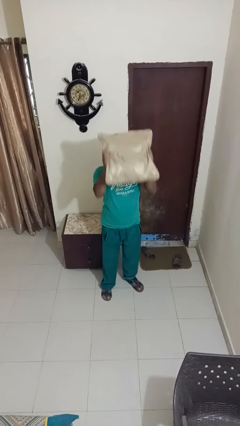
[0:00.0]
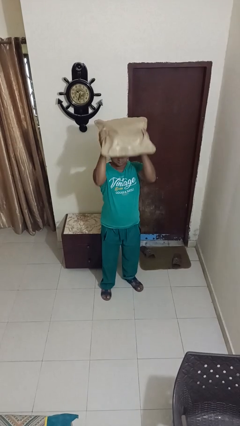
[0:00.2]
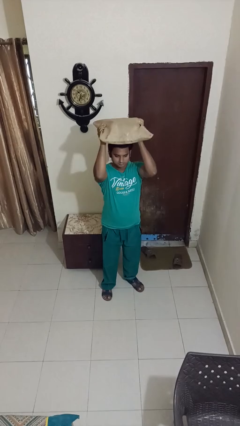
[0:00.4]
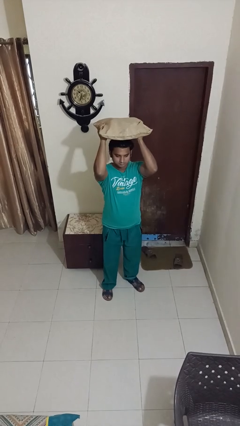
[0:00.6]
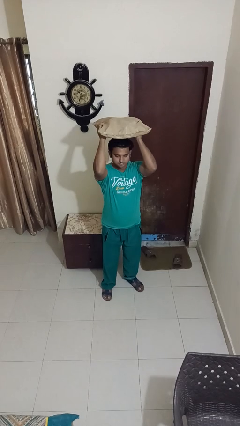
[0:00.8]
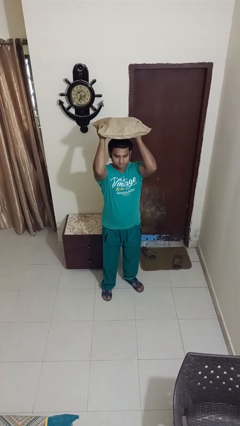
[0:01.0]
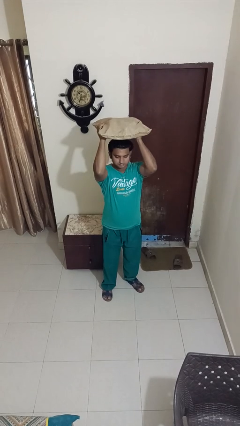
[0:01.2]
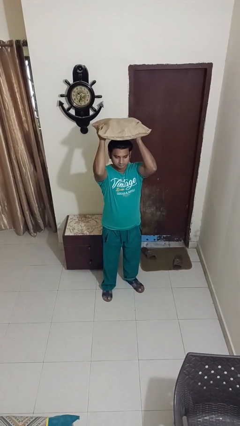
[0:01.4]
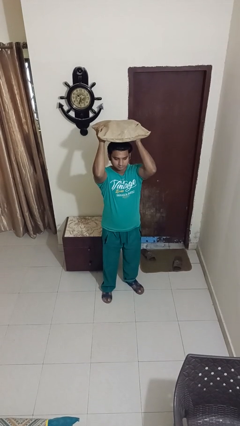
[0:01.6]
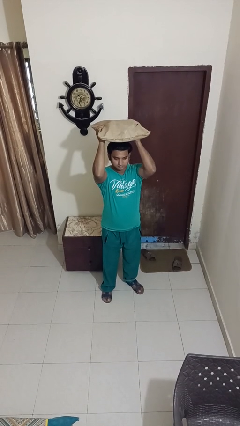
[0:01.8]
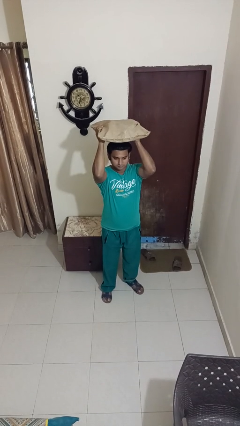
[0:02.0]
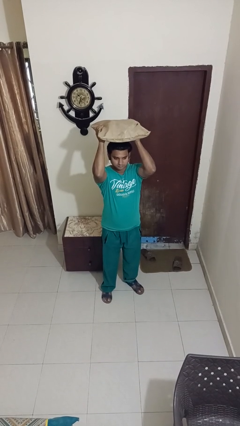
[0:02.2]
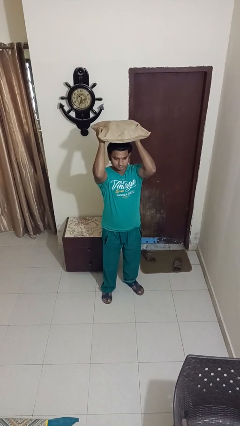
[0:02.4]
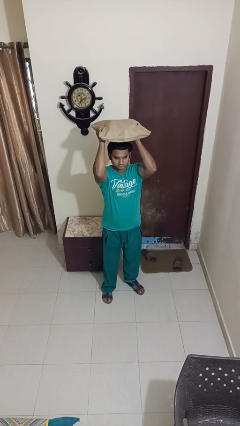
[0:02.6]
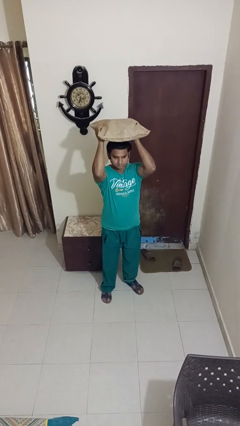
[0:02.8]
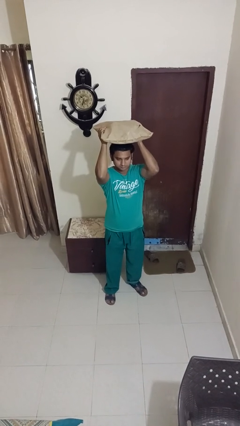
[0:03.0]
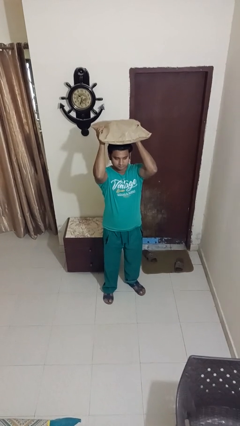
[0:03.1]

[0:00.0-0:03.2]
person holds object above head

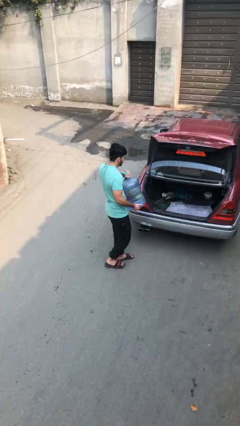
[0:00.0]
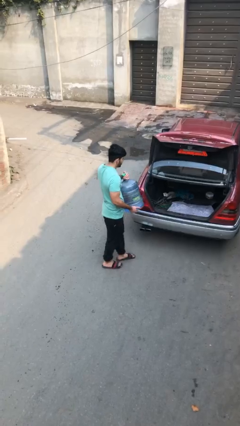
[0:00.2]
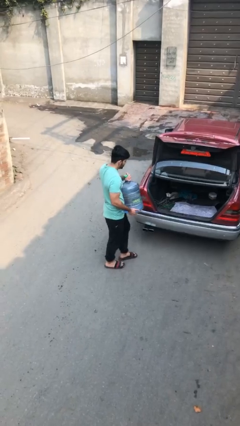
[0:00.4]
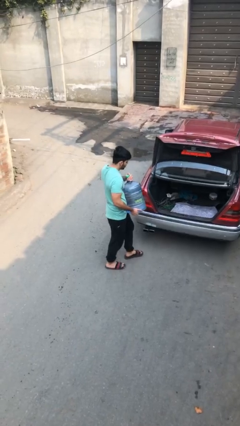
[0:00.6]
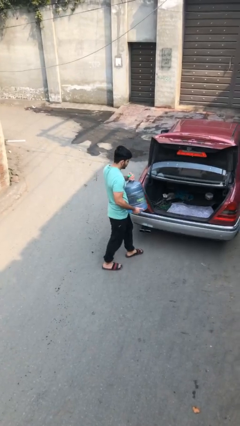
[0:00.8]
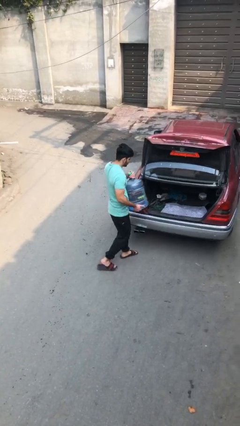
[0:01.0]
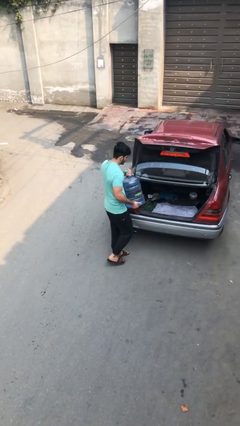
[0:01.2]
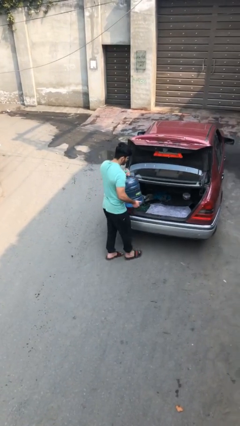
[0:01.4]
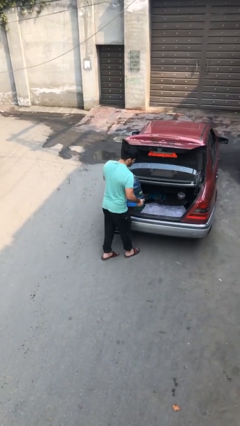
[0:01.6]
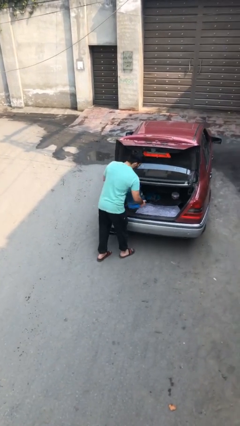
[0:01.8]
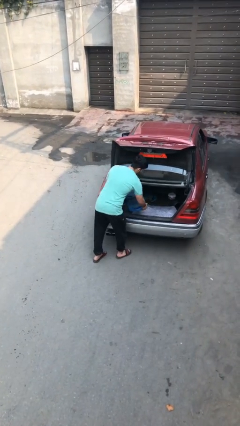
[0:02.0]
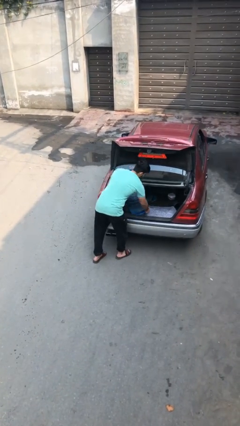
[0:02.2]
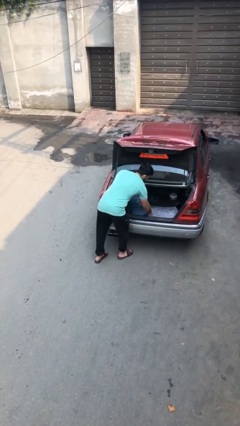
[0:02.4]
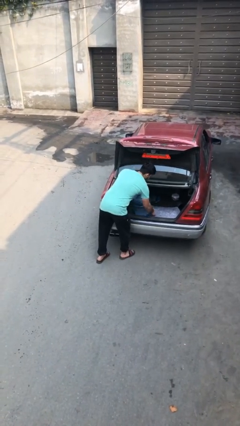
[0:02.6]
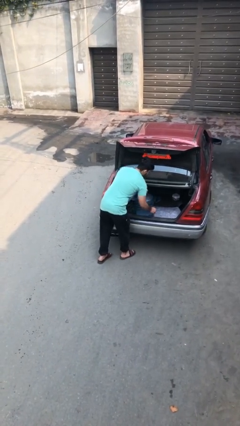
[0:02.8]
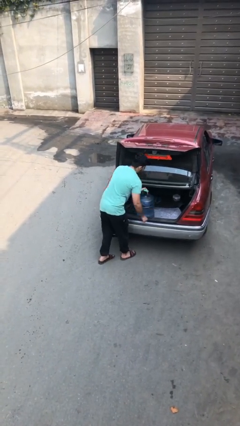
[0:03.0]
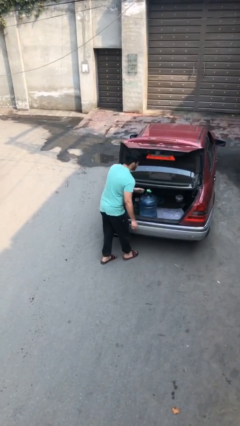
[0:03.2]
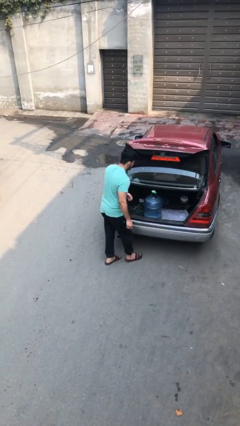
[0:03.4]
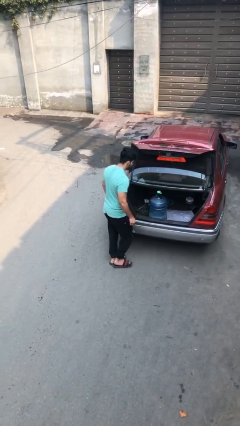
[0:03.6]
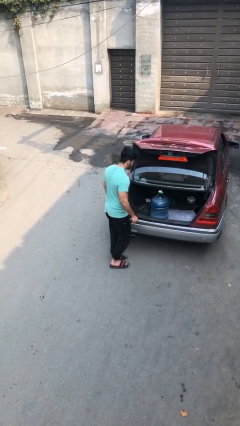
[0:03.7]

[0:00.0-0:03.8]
person loads car

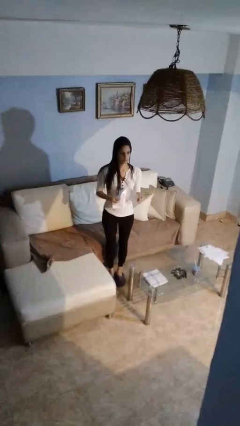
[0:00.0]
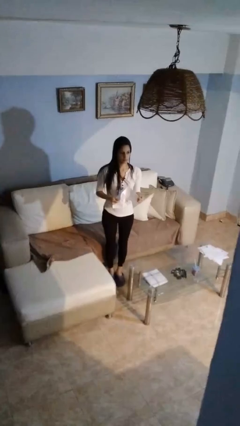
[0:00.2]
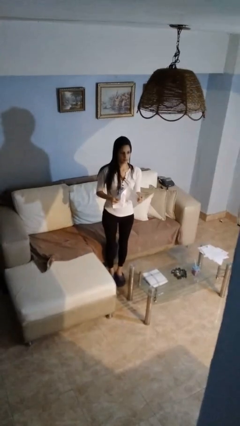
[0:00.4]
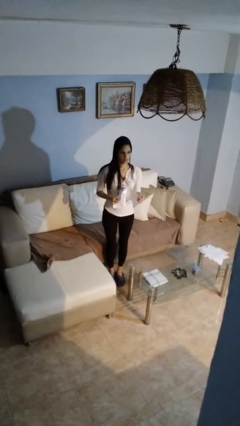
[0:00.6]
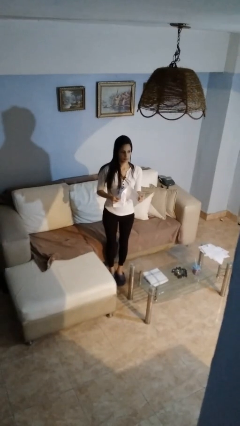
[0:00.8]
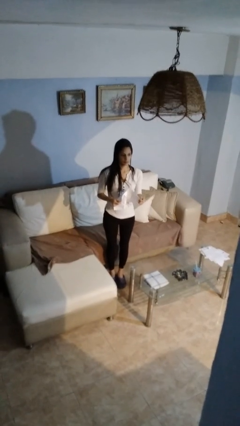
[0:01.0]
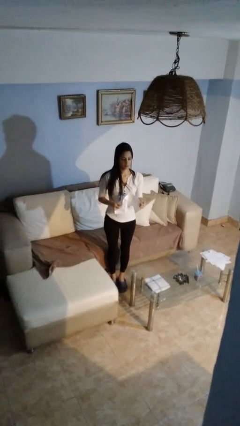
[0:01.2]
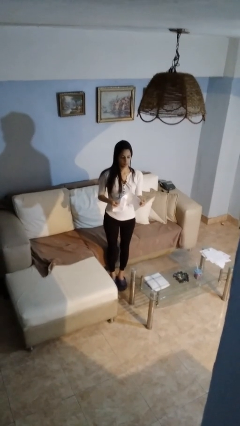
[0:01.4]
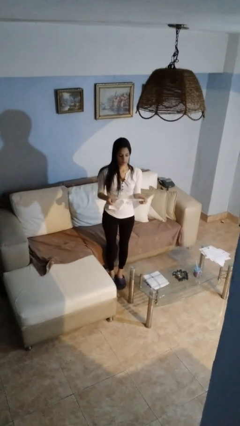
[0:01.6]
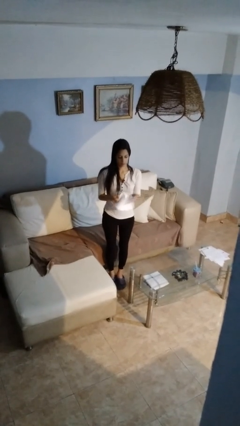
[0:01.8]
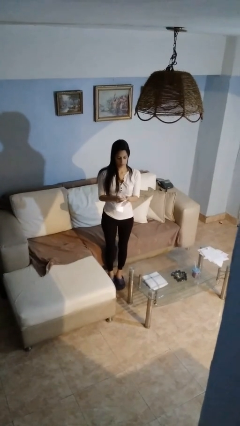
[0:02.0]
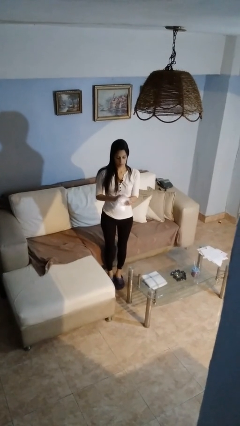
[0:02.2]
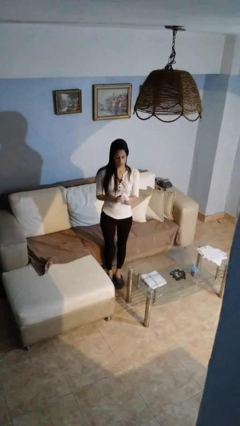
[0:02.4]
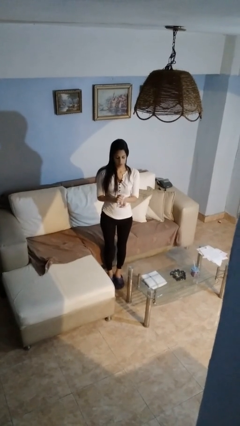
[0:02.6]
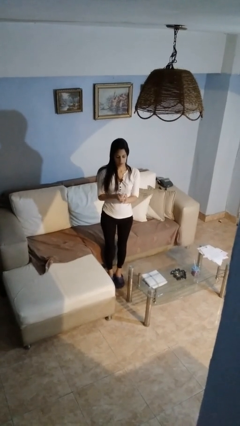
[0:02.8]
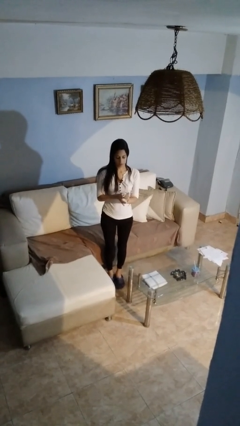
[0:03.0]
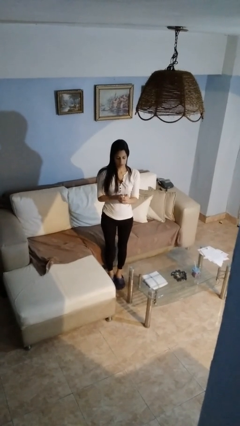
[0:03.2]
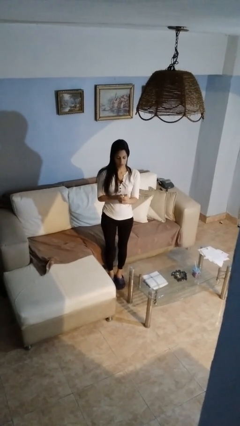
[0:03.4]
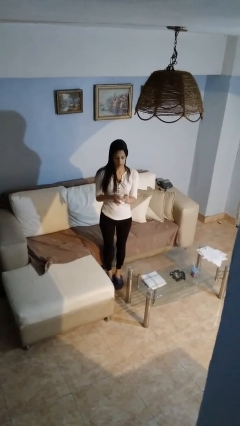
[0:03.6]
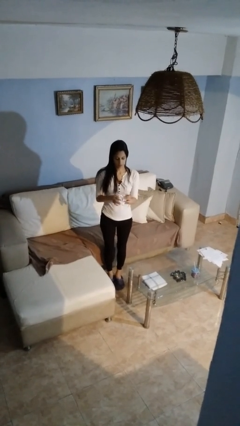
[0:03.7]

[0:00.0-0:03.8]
person crumples paper

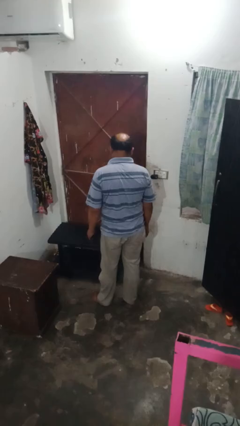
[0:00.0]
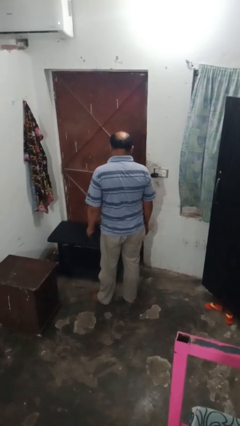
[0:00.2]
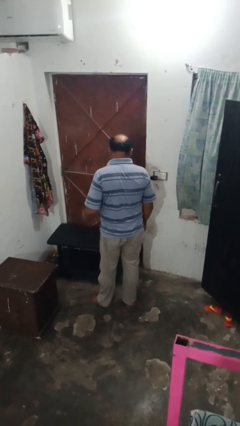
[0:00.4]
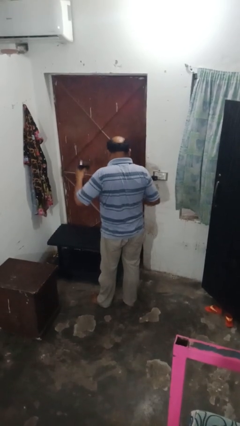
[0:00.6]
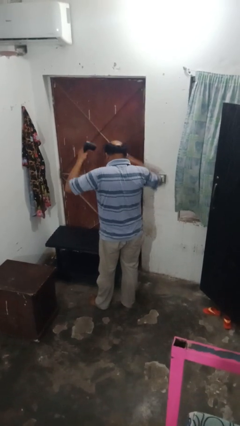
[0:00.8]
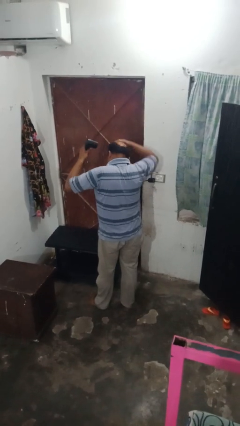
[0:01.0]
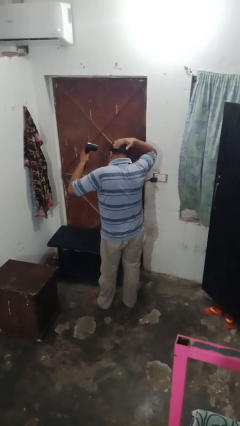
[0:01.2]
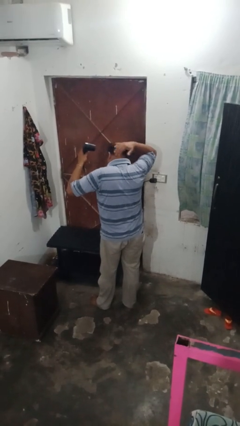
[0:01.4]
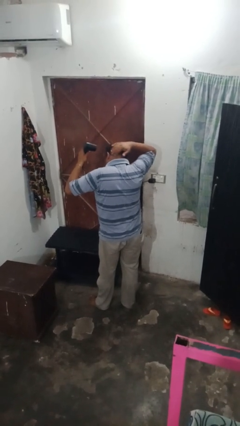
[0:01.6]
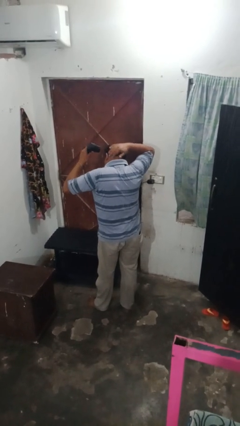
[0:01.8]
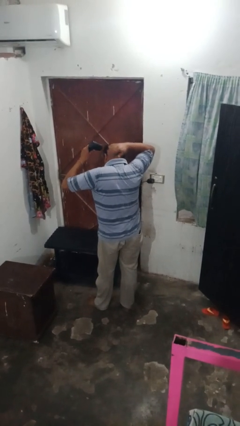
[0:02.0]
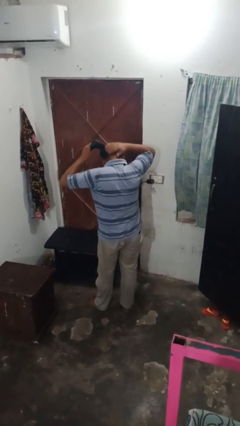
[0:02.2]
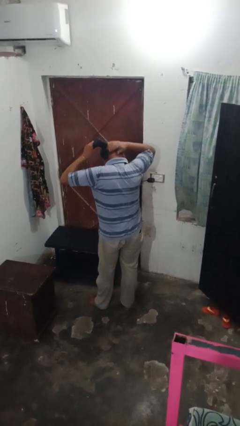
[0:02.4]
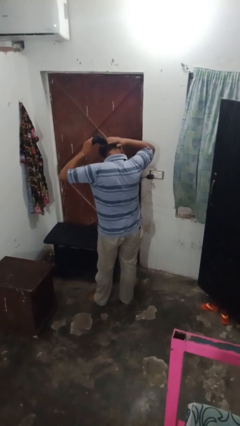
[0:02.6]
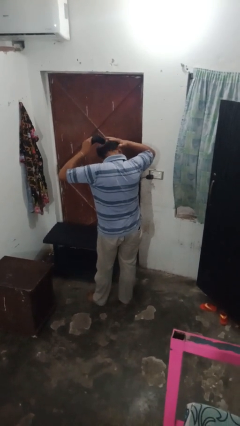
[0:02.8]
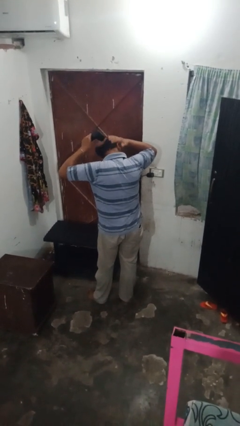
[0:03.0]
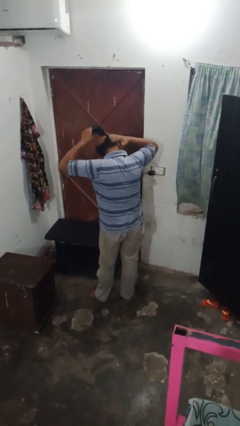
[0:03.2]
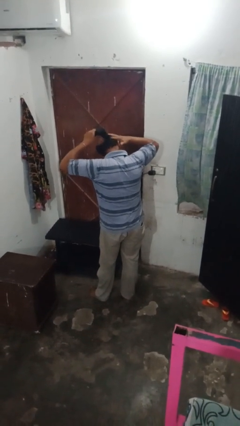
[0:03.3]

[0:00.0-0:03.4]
person dries hair with hairdryer

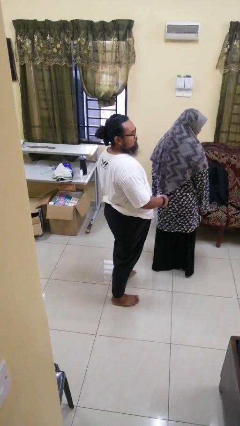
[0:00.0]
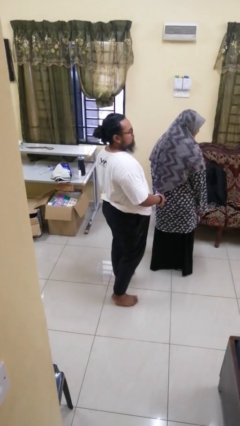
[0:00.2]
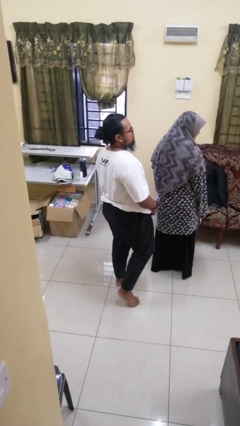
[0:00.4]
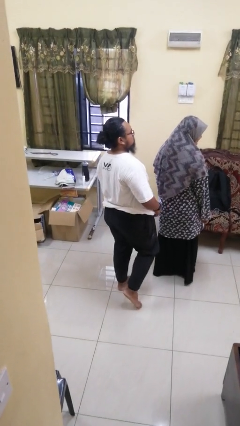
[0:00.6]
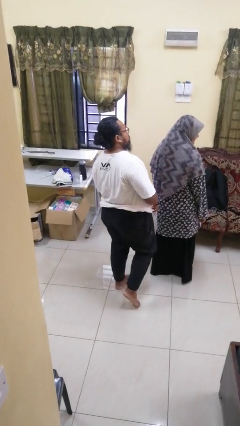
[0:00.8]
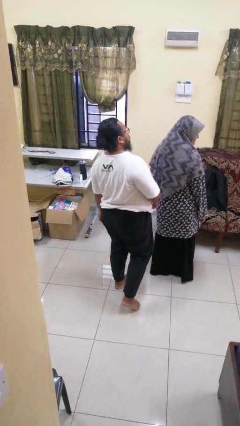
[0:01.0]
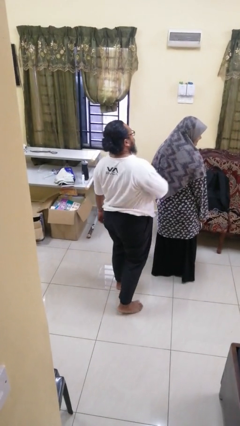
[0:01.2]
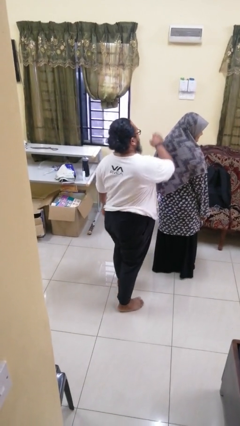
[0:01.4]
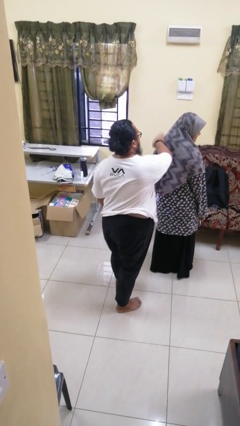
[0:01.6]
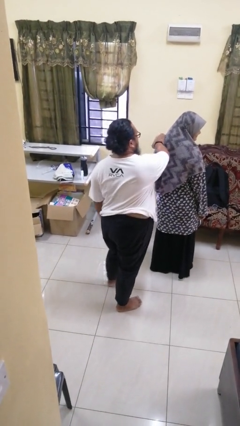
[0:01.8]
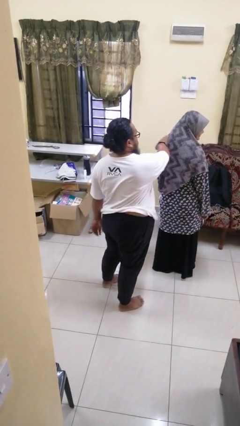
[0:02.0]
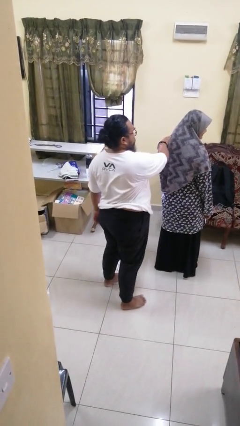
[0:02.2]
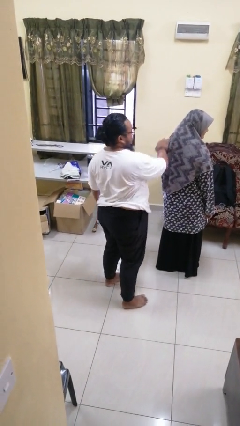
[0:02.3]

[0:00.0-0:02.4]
person touches back of person

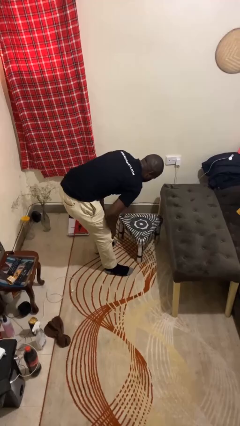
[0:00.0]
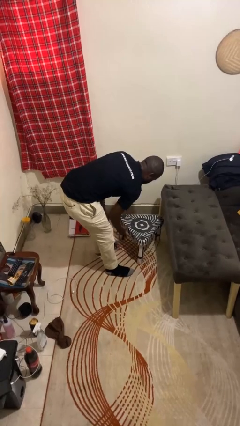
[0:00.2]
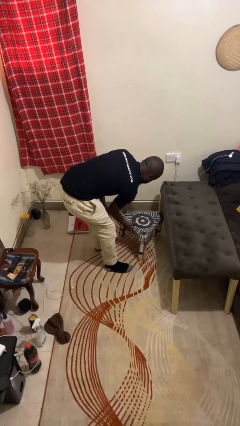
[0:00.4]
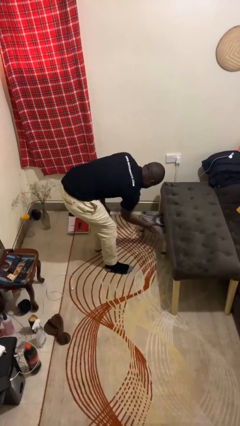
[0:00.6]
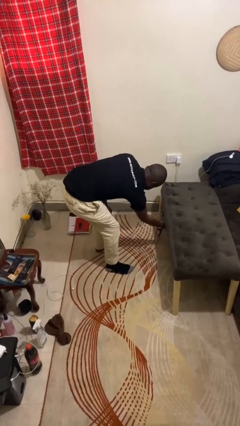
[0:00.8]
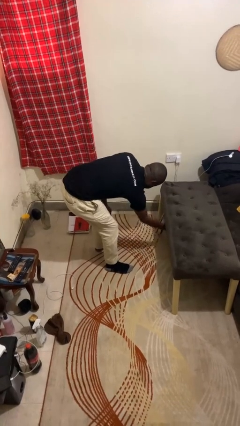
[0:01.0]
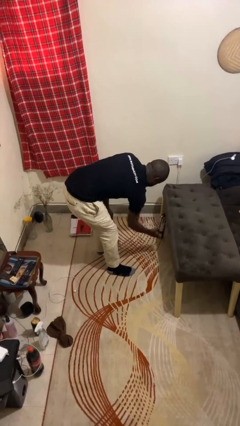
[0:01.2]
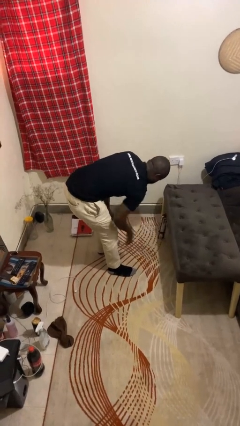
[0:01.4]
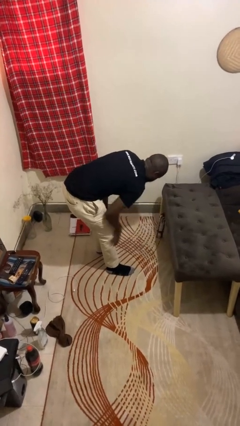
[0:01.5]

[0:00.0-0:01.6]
person pushes in chair
